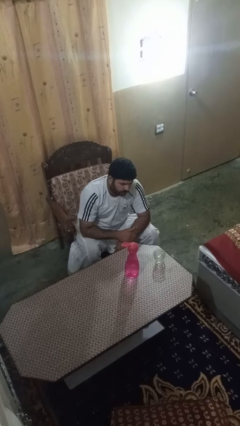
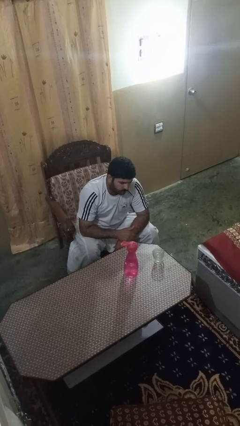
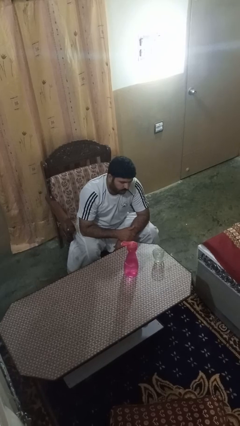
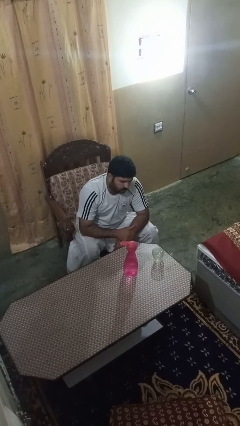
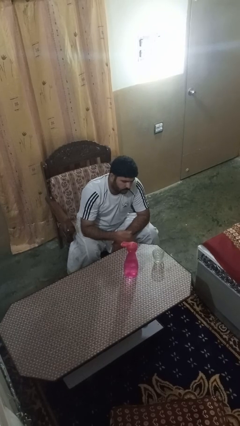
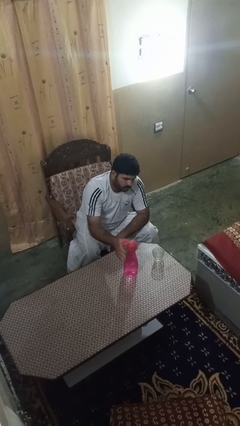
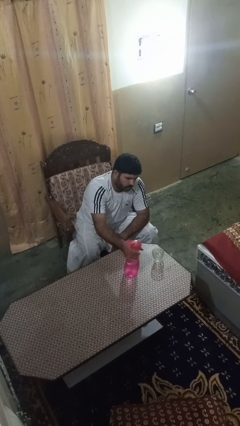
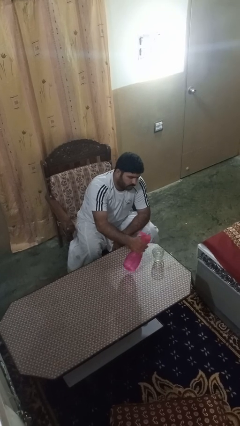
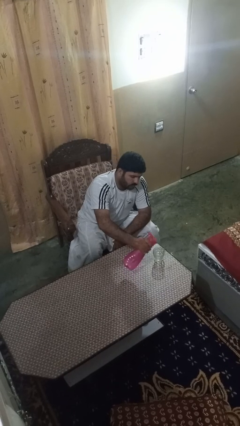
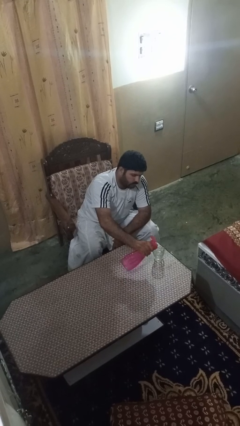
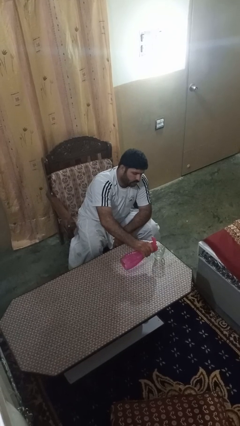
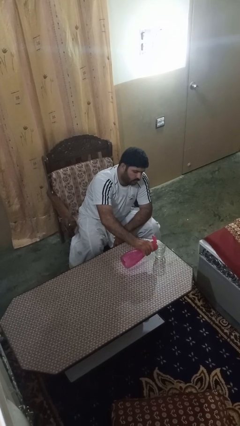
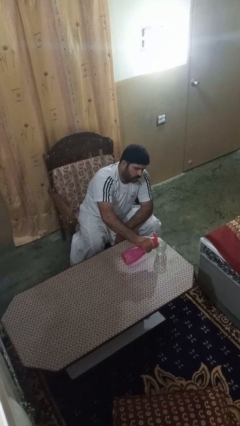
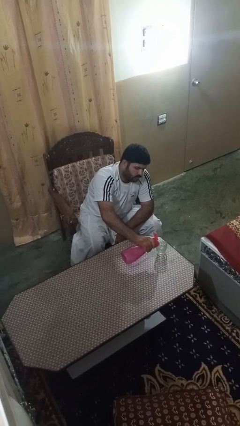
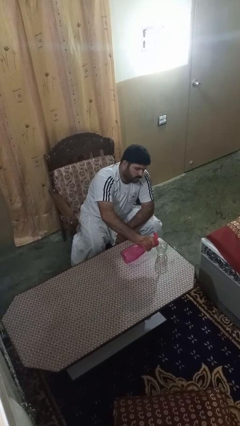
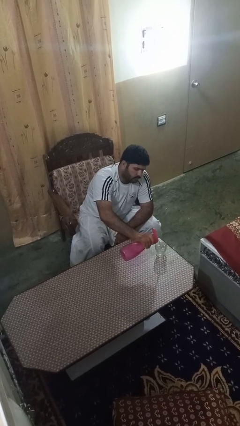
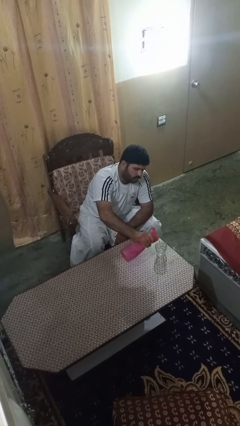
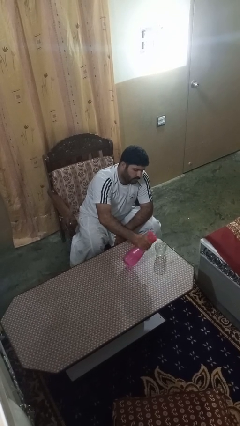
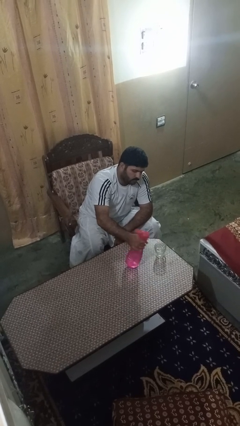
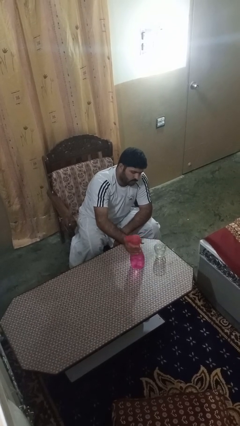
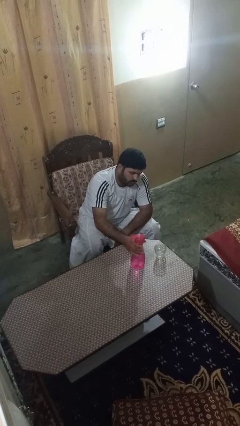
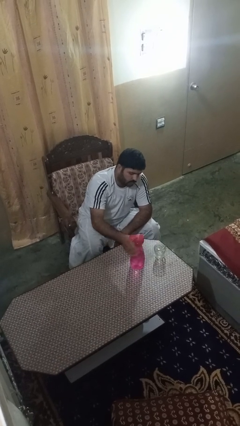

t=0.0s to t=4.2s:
person pours liquid into cup

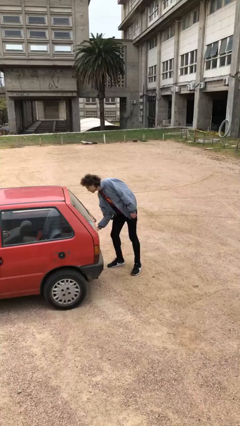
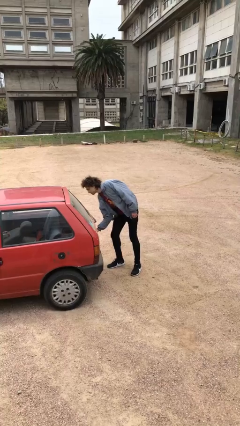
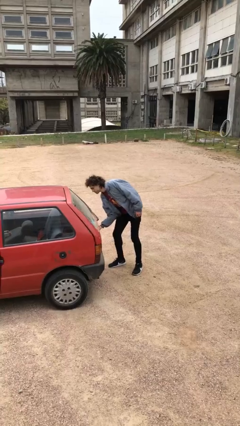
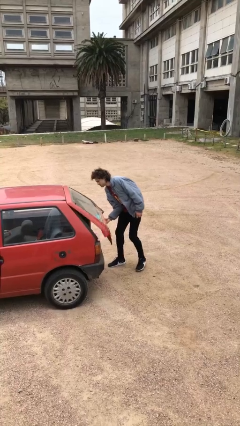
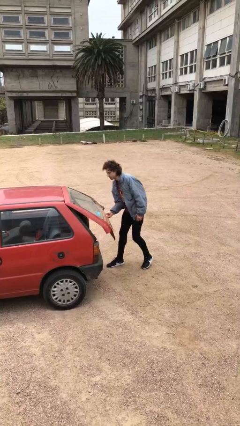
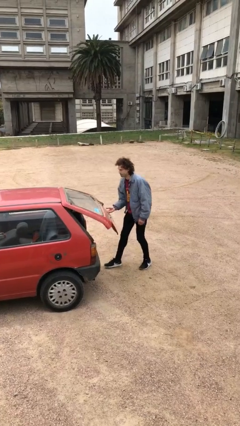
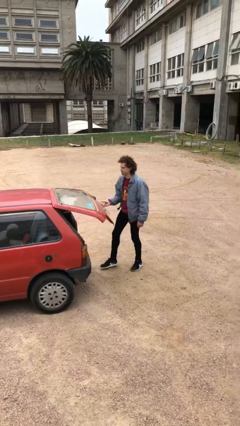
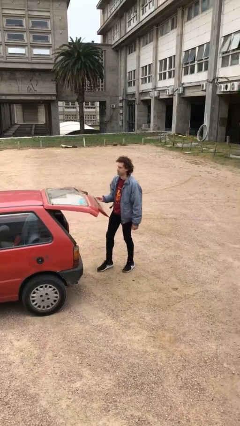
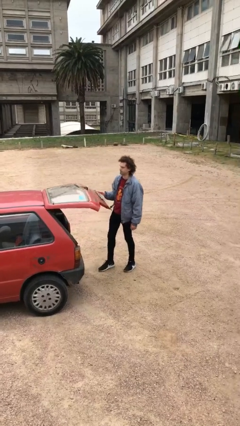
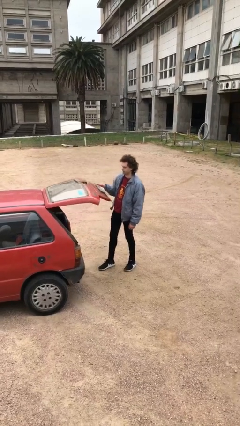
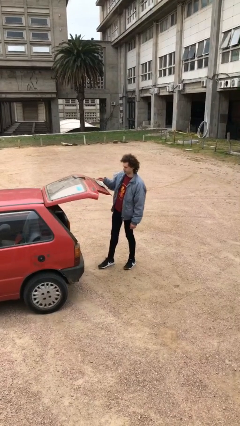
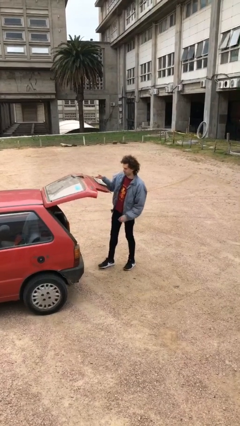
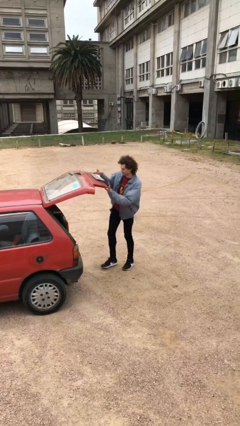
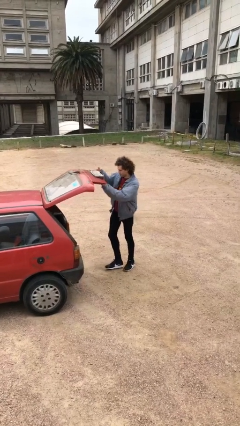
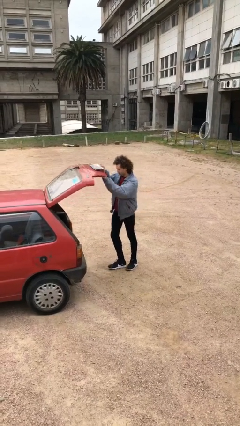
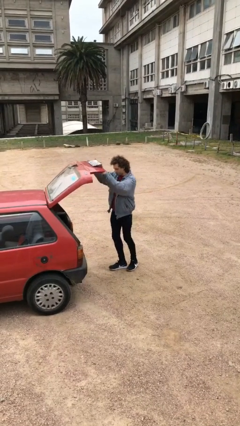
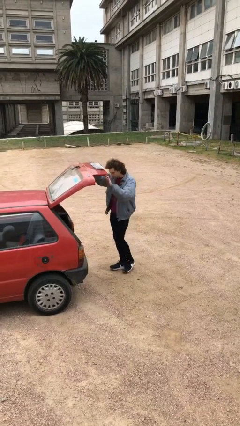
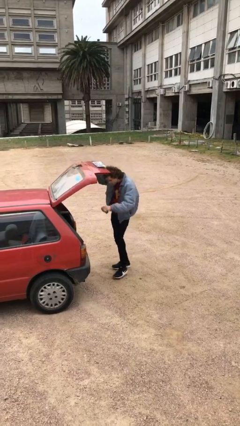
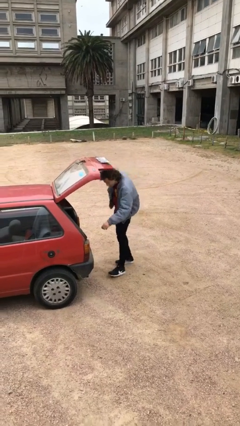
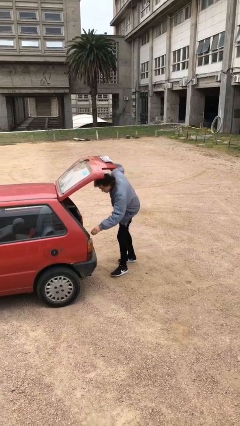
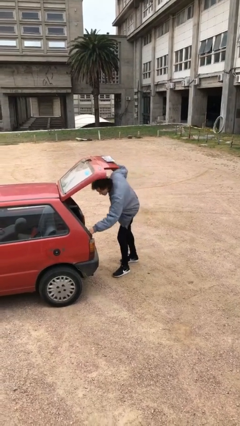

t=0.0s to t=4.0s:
person opens car trunk

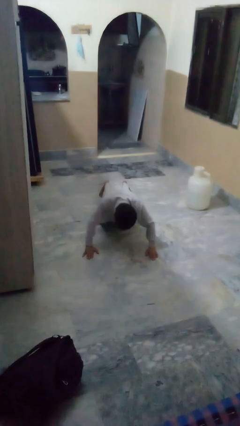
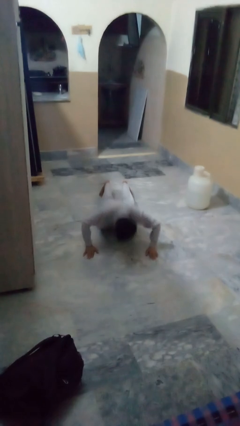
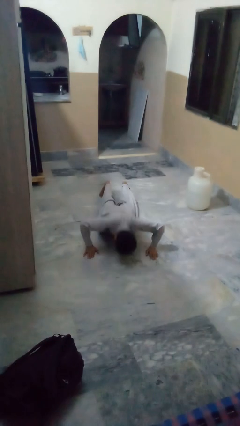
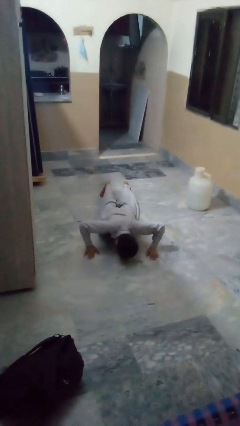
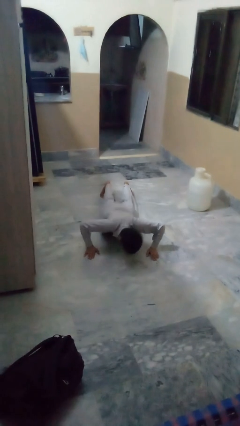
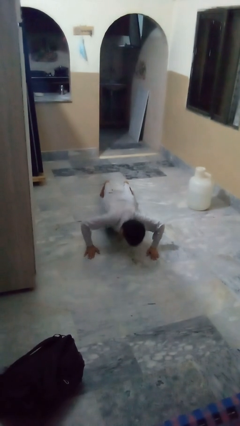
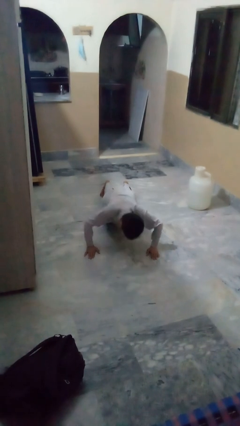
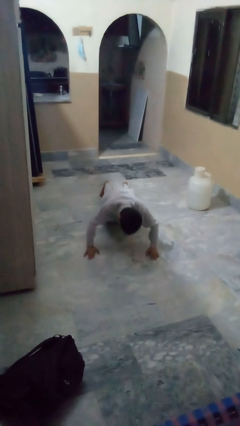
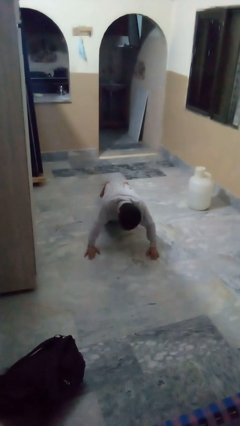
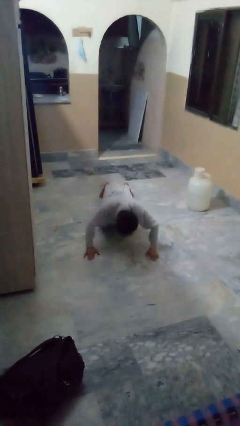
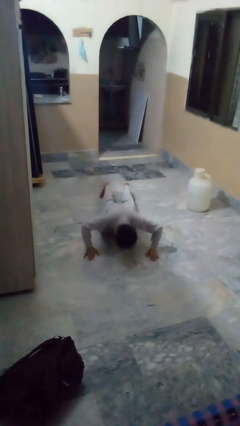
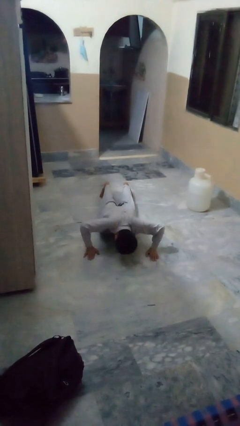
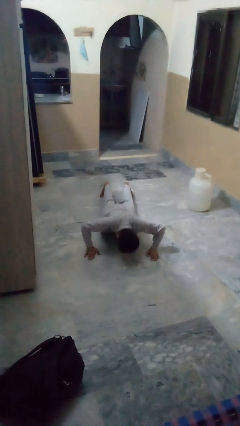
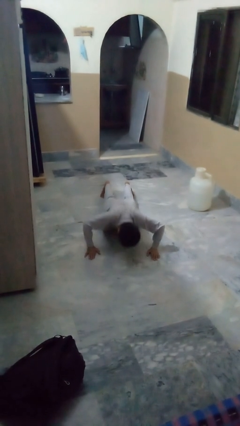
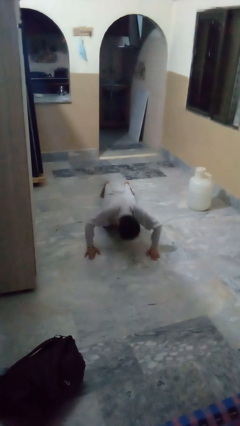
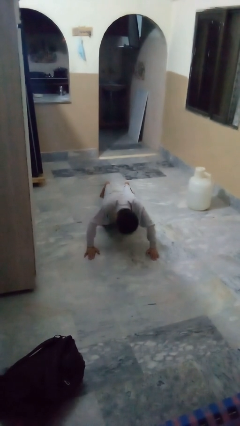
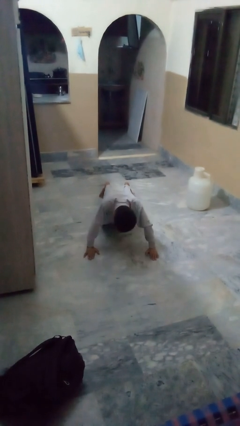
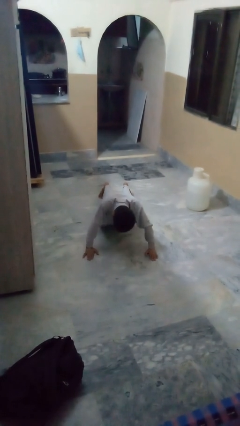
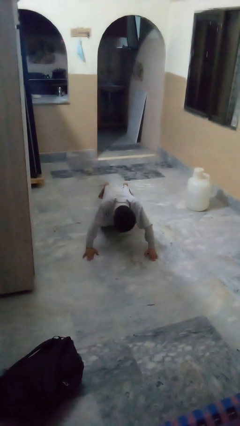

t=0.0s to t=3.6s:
person exercises with pushup

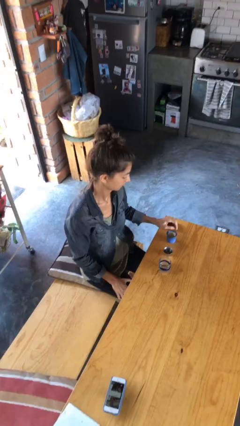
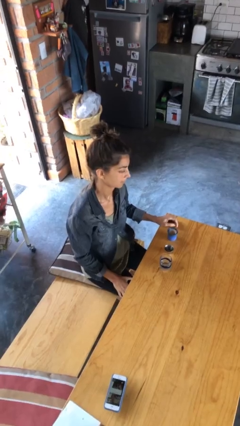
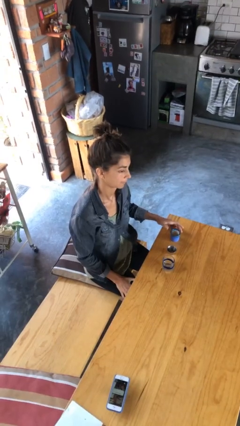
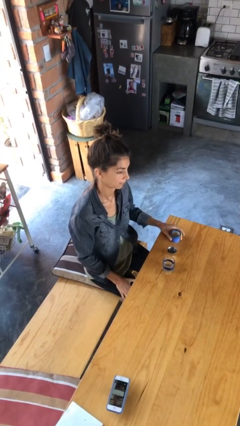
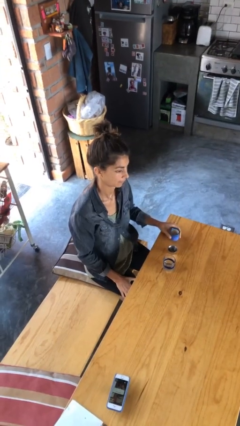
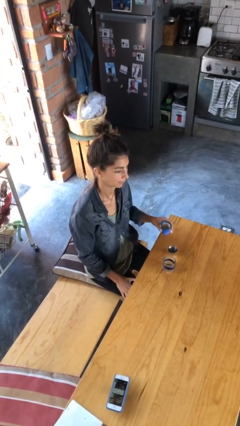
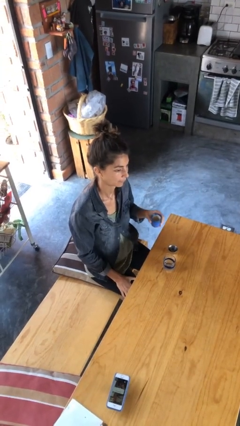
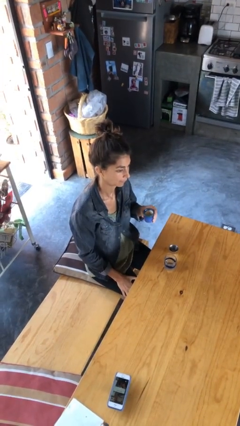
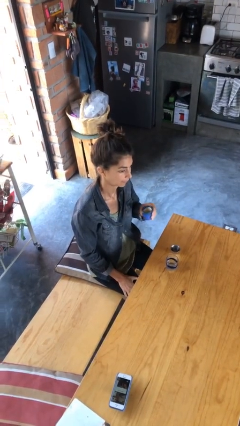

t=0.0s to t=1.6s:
person picks up object from table

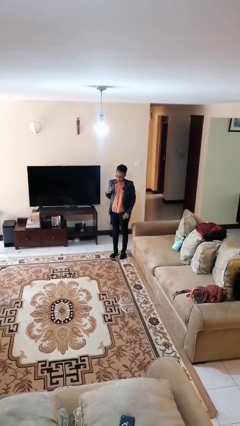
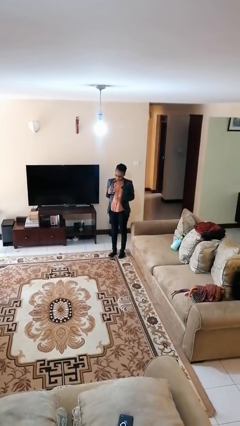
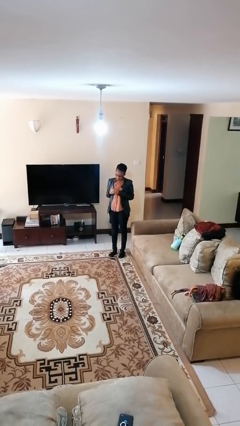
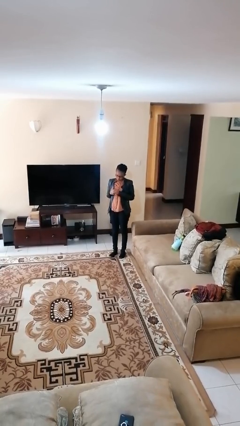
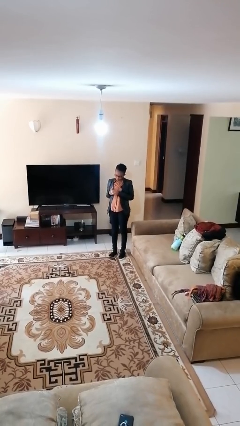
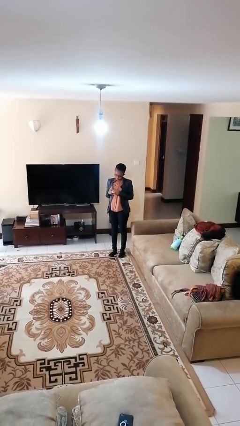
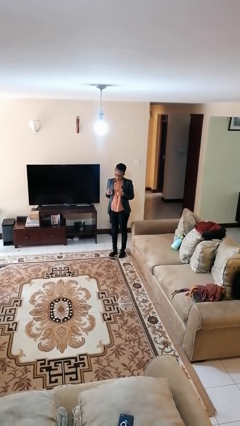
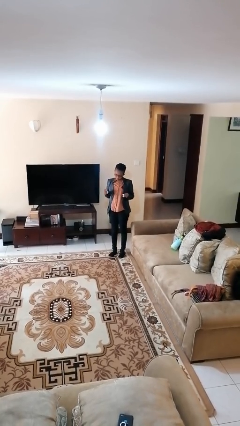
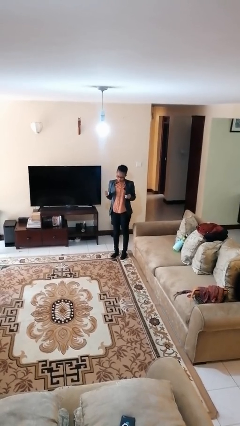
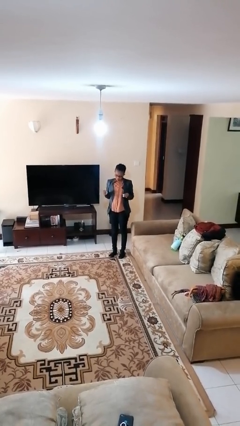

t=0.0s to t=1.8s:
person takes off ring

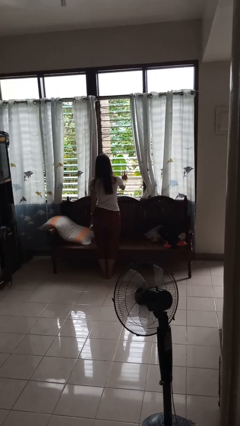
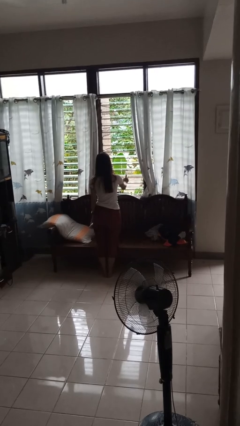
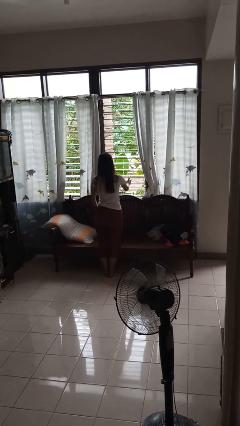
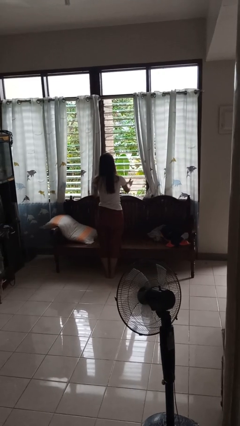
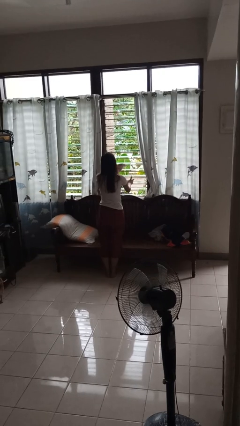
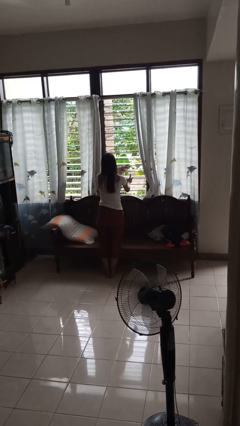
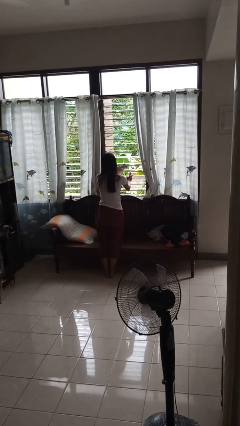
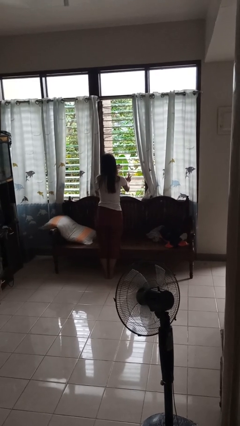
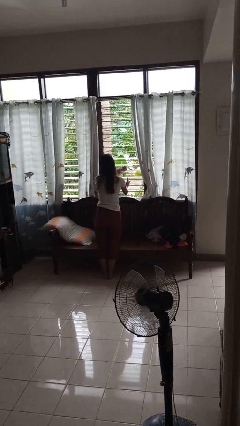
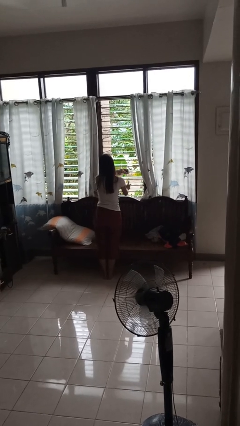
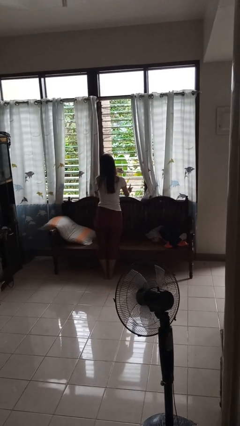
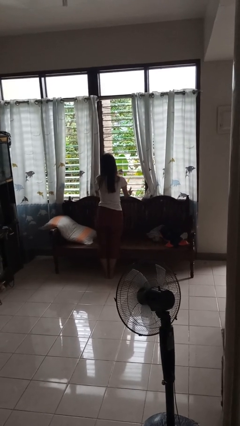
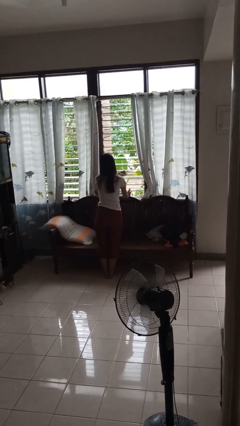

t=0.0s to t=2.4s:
person washes window
